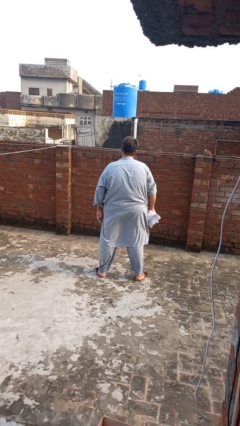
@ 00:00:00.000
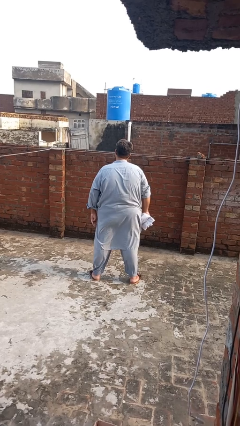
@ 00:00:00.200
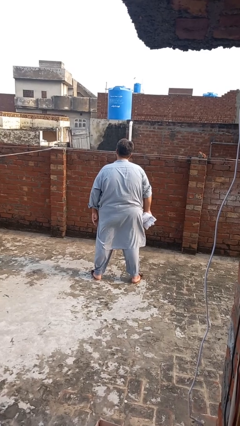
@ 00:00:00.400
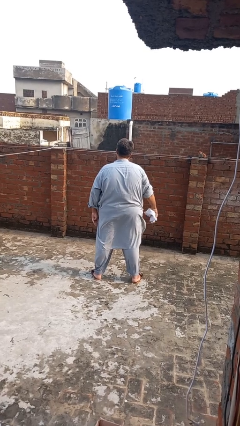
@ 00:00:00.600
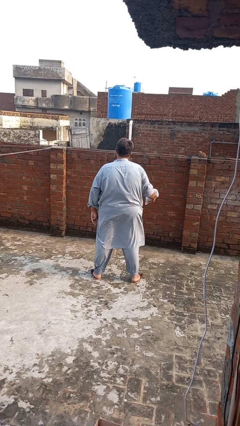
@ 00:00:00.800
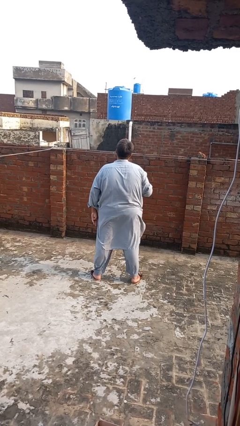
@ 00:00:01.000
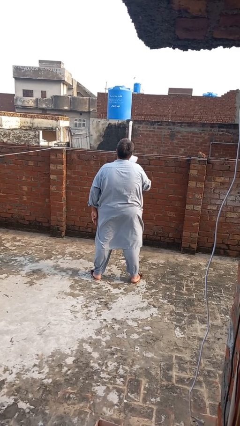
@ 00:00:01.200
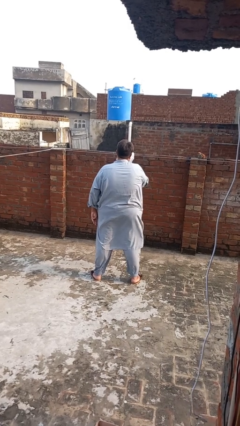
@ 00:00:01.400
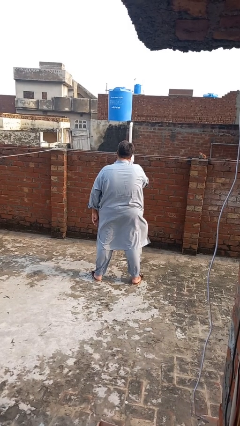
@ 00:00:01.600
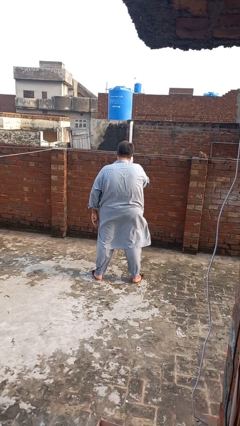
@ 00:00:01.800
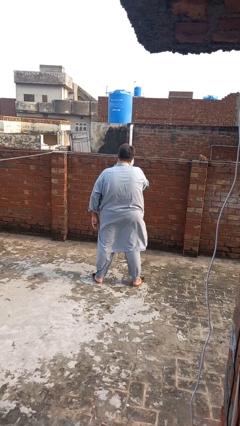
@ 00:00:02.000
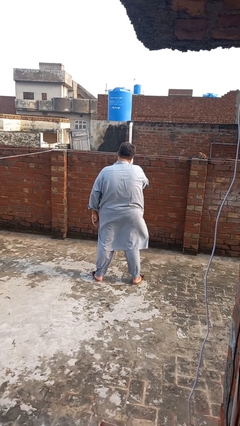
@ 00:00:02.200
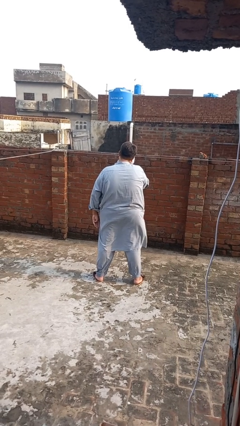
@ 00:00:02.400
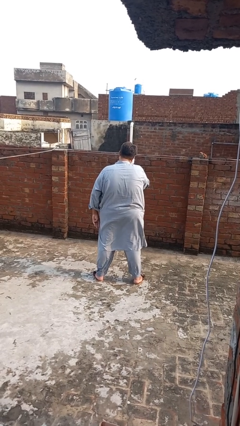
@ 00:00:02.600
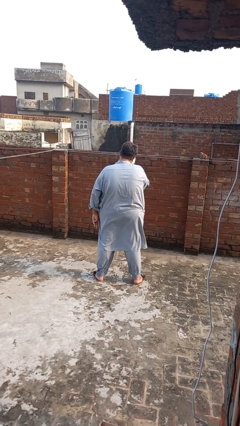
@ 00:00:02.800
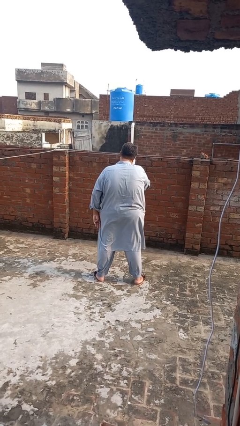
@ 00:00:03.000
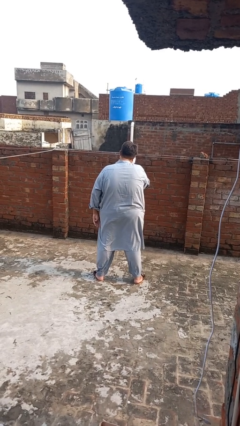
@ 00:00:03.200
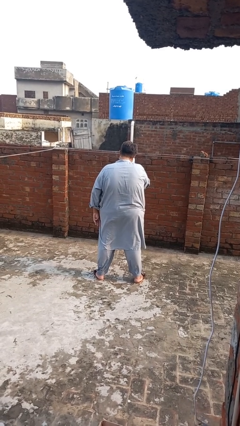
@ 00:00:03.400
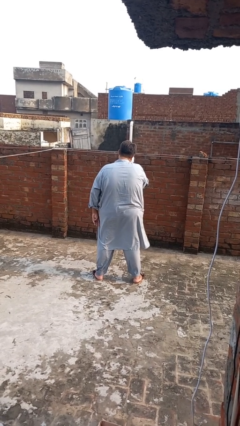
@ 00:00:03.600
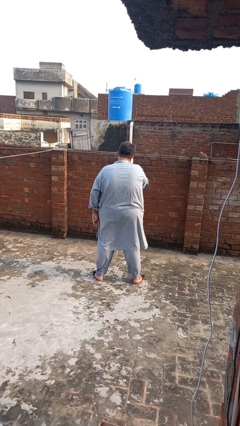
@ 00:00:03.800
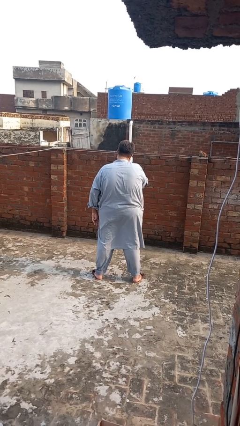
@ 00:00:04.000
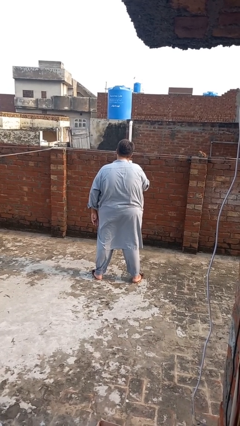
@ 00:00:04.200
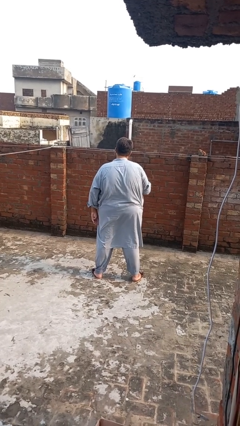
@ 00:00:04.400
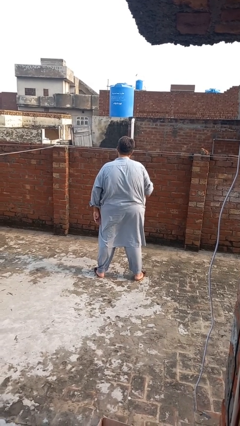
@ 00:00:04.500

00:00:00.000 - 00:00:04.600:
person blows nose

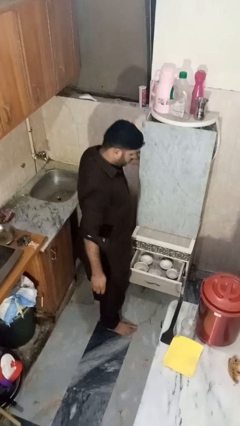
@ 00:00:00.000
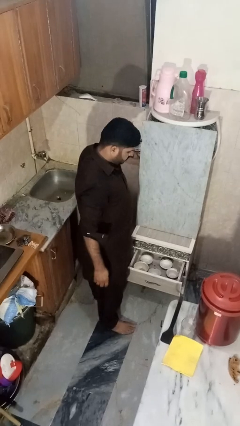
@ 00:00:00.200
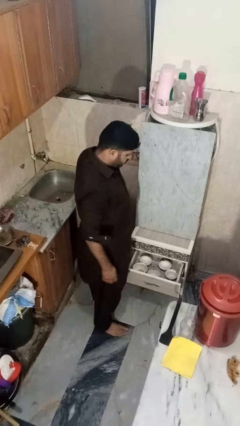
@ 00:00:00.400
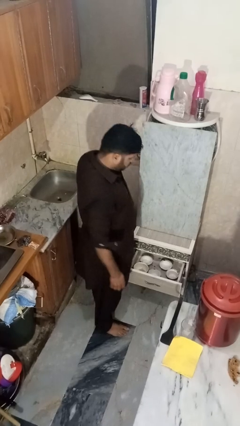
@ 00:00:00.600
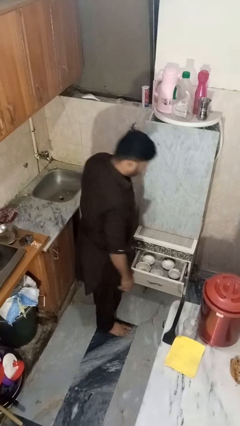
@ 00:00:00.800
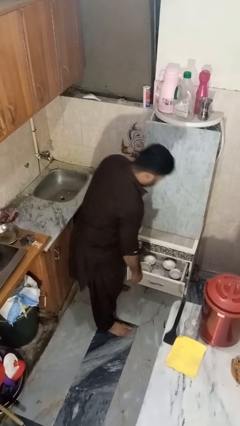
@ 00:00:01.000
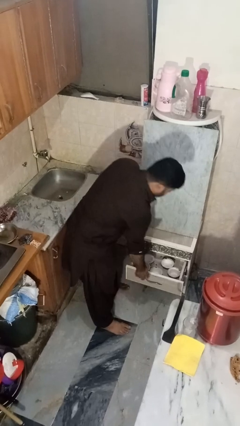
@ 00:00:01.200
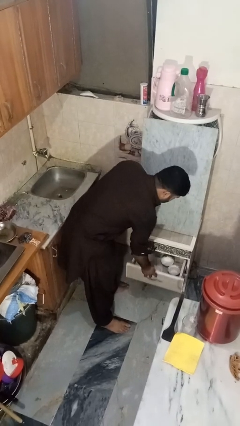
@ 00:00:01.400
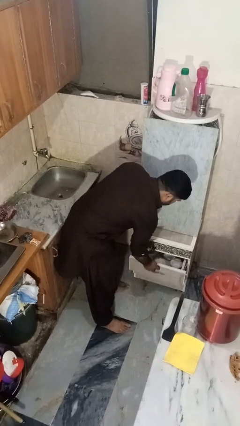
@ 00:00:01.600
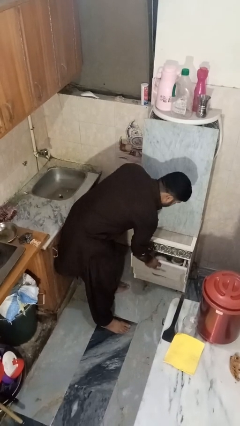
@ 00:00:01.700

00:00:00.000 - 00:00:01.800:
person closes kitchen drawer

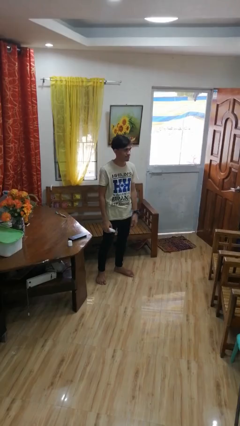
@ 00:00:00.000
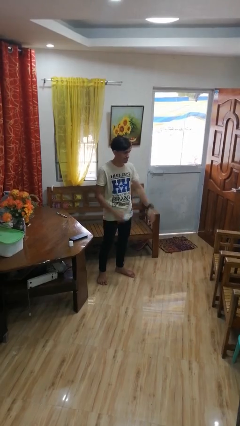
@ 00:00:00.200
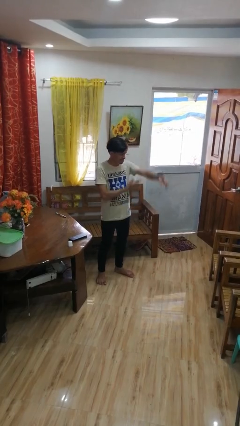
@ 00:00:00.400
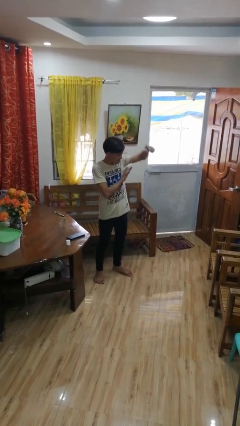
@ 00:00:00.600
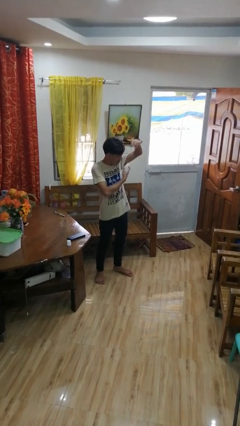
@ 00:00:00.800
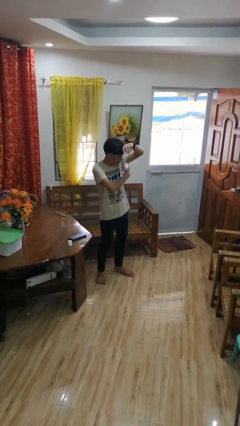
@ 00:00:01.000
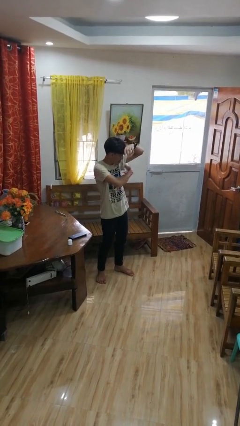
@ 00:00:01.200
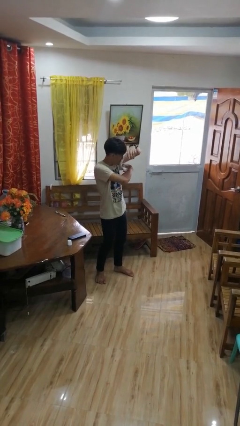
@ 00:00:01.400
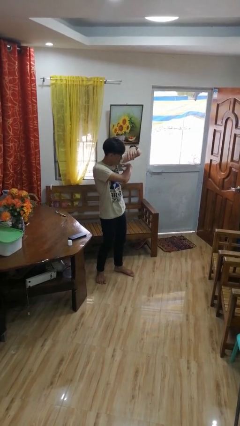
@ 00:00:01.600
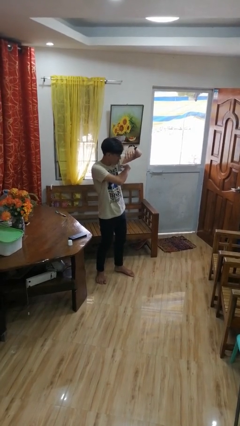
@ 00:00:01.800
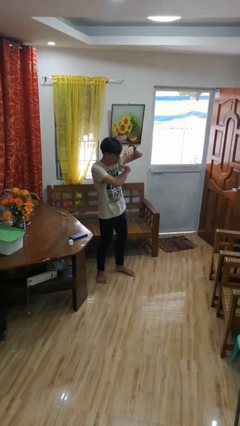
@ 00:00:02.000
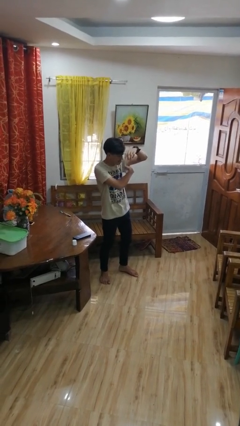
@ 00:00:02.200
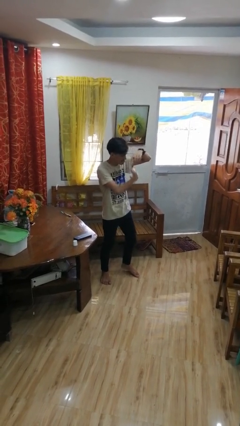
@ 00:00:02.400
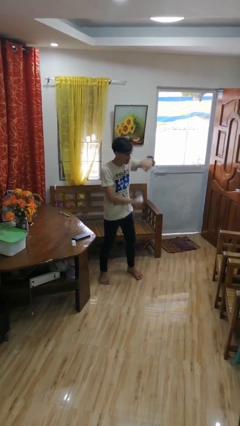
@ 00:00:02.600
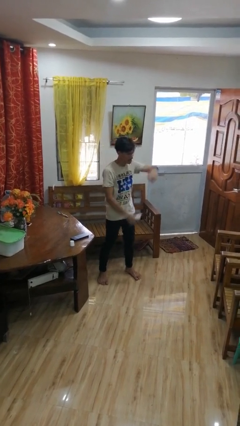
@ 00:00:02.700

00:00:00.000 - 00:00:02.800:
person applies deodorant

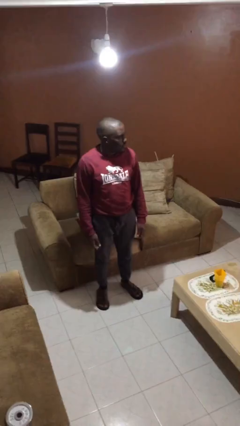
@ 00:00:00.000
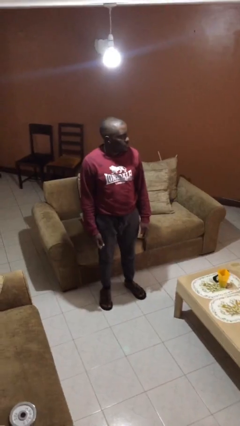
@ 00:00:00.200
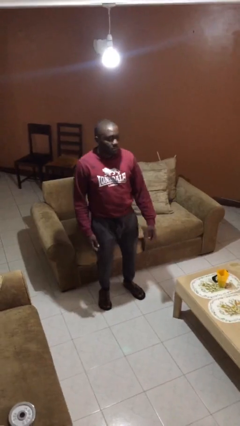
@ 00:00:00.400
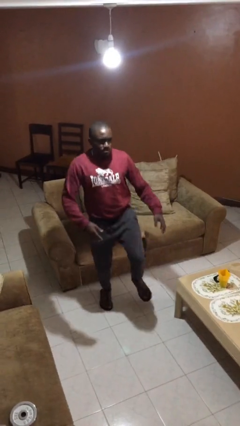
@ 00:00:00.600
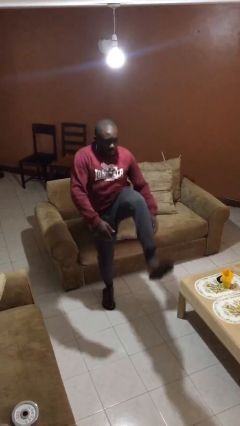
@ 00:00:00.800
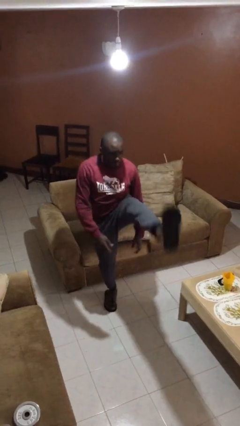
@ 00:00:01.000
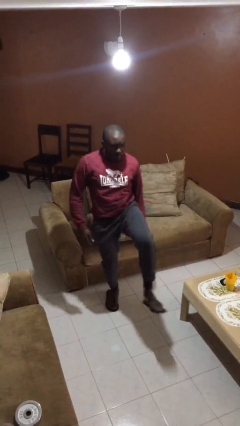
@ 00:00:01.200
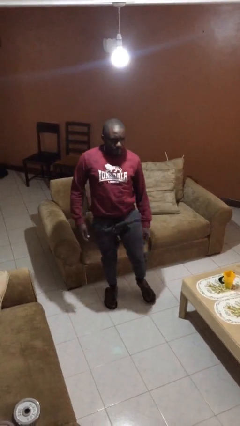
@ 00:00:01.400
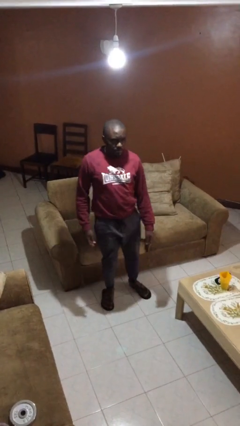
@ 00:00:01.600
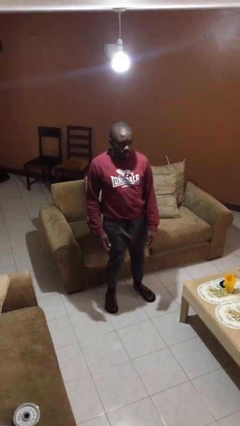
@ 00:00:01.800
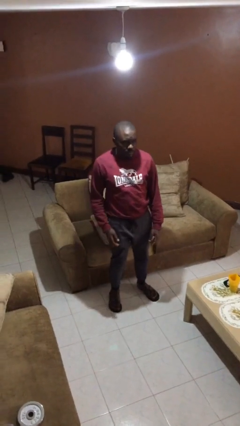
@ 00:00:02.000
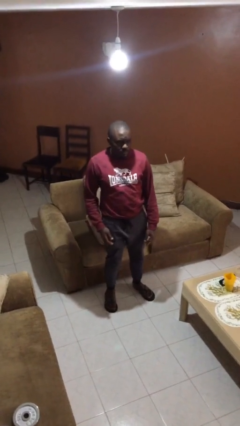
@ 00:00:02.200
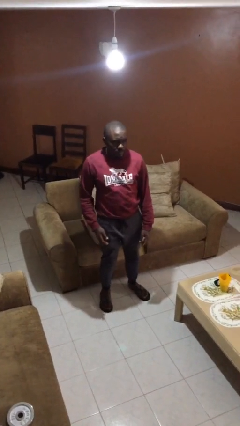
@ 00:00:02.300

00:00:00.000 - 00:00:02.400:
person karate kicks

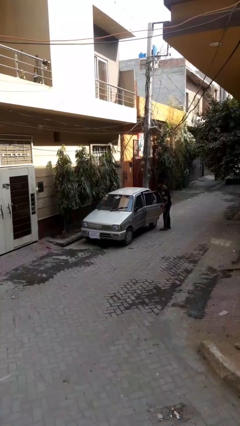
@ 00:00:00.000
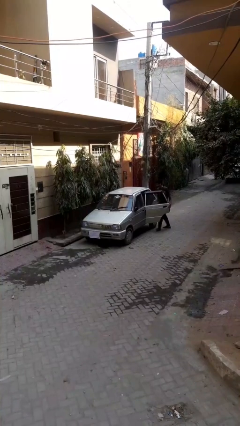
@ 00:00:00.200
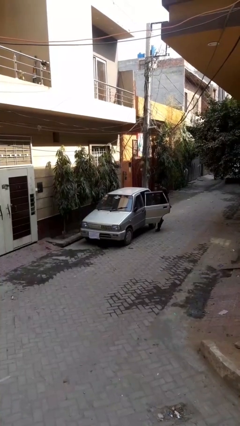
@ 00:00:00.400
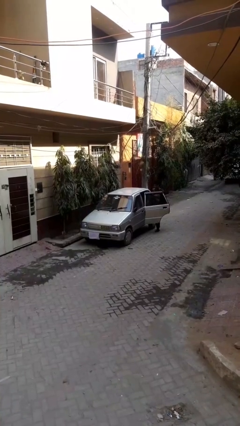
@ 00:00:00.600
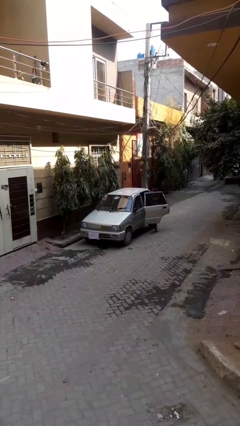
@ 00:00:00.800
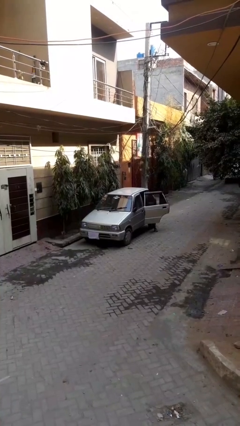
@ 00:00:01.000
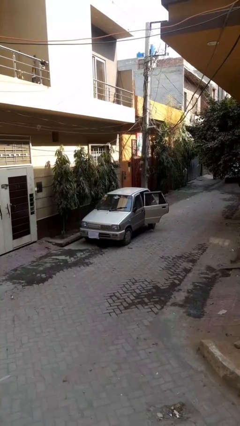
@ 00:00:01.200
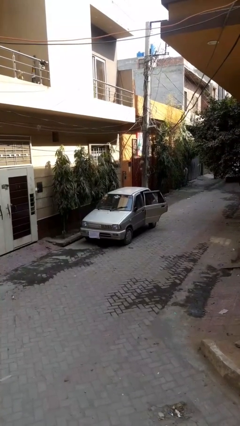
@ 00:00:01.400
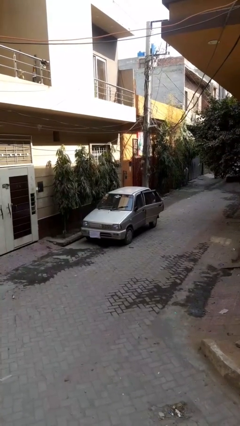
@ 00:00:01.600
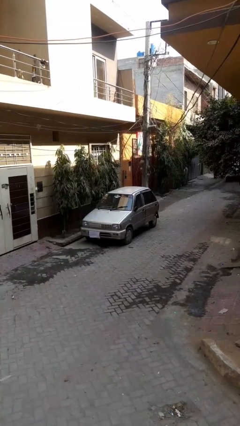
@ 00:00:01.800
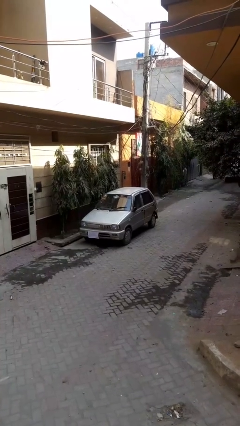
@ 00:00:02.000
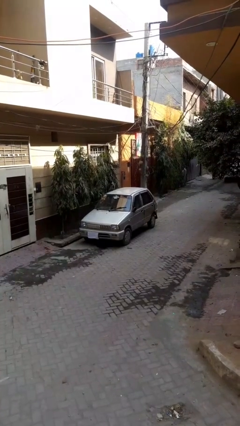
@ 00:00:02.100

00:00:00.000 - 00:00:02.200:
car picks up person

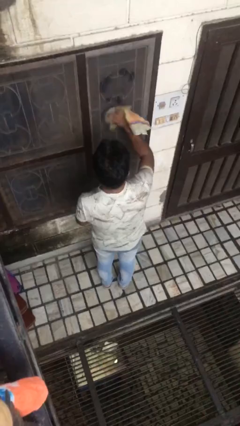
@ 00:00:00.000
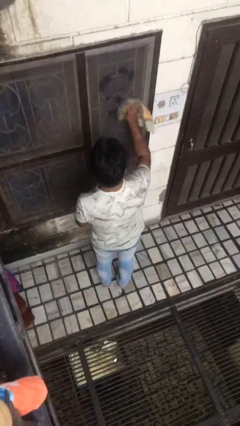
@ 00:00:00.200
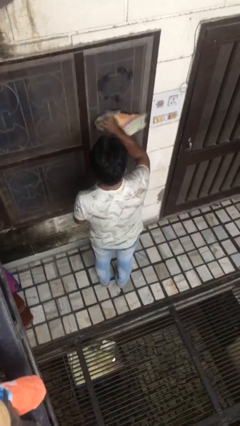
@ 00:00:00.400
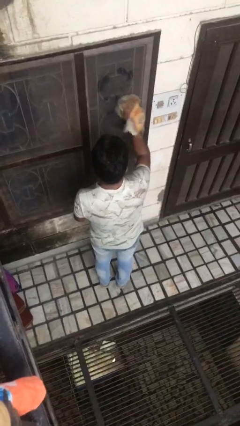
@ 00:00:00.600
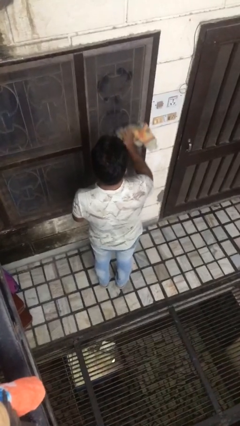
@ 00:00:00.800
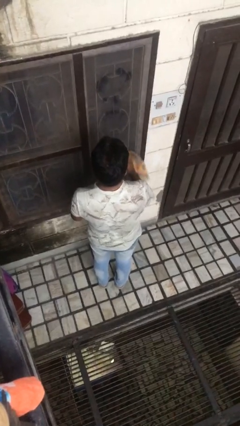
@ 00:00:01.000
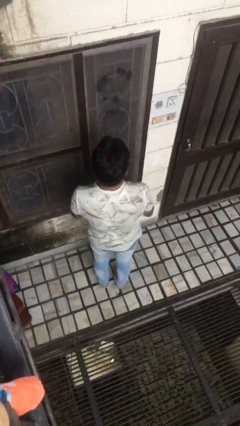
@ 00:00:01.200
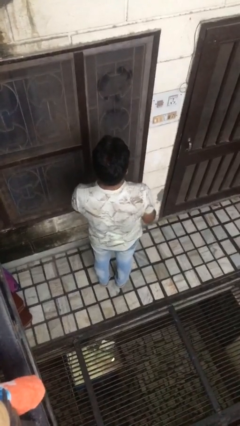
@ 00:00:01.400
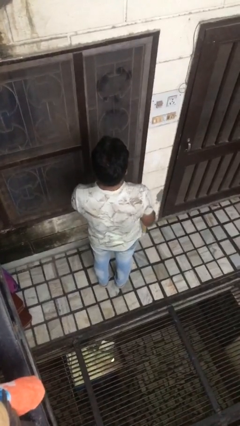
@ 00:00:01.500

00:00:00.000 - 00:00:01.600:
person washes window

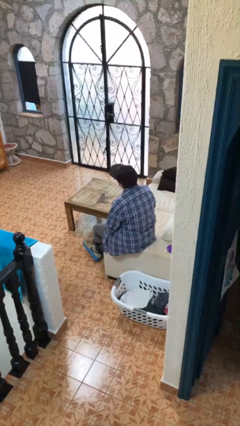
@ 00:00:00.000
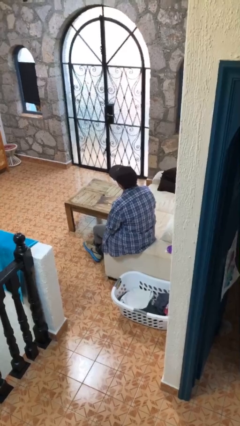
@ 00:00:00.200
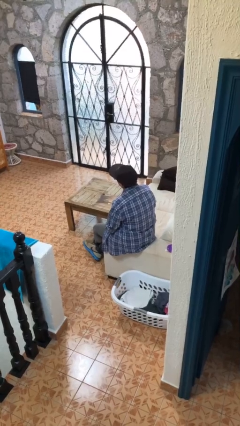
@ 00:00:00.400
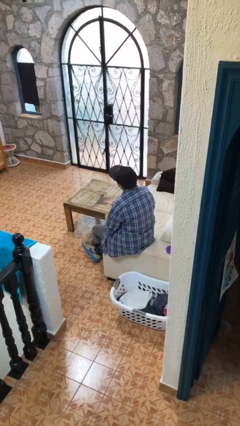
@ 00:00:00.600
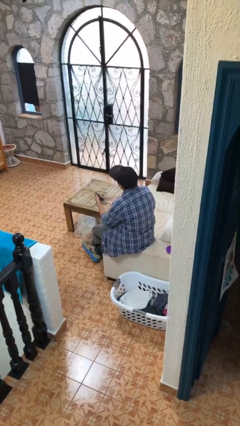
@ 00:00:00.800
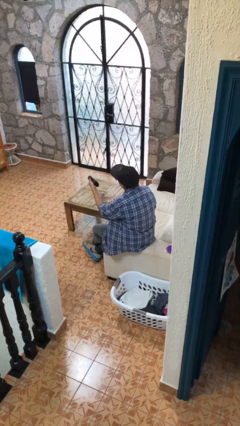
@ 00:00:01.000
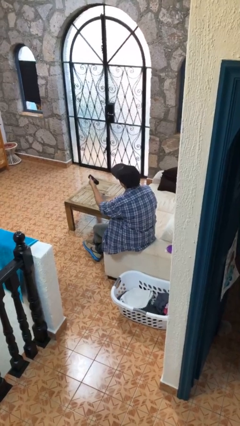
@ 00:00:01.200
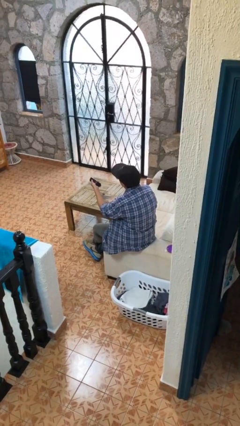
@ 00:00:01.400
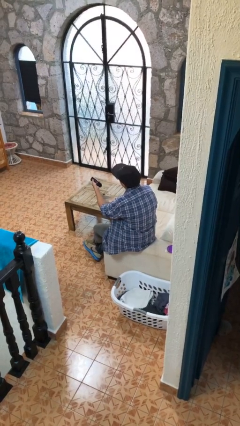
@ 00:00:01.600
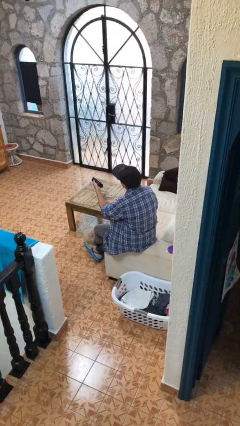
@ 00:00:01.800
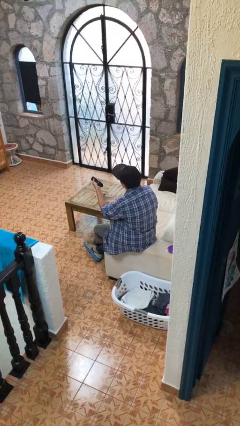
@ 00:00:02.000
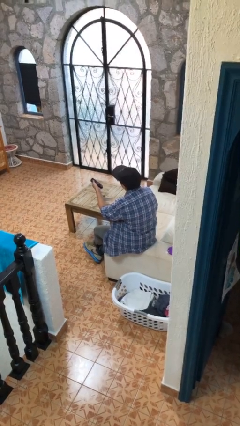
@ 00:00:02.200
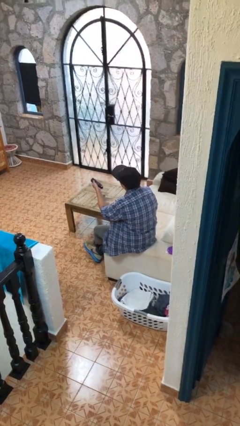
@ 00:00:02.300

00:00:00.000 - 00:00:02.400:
person uses television remote
